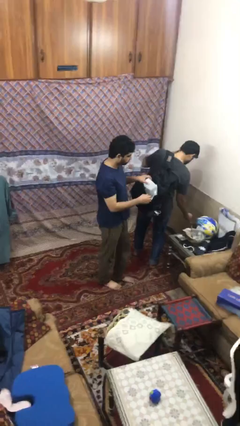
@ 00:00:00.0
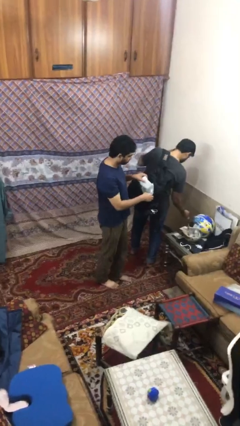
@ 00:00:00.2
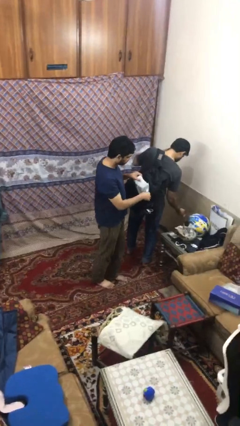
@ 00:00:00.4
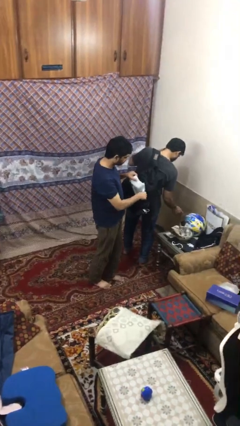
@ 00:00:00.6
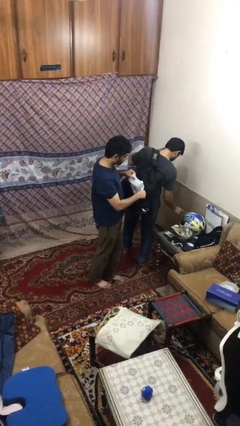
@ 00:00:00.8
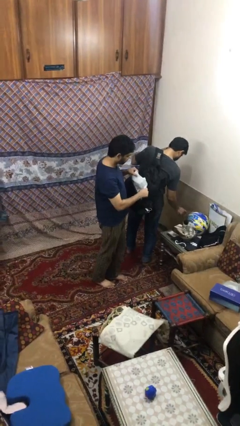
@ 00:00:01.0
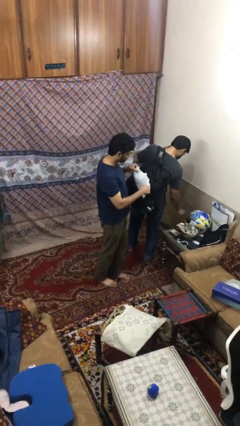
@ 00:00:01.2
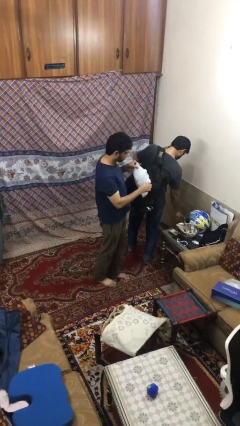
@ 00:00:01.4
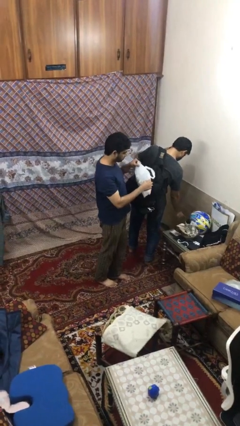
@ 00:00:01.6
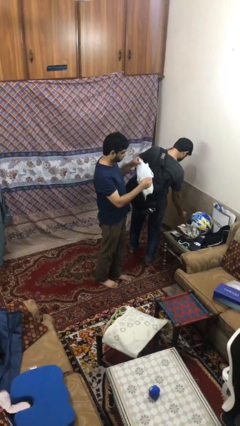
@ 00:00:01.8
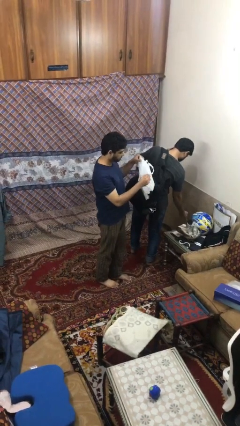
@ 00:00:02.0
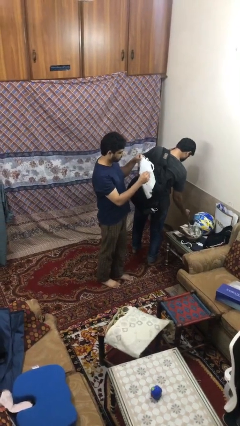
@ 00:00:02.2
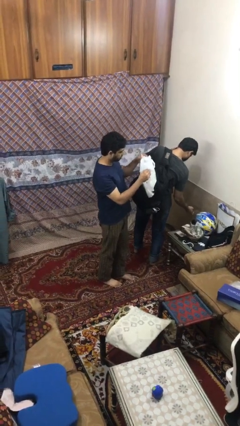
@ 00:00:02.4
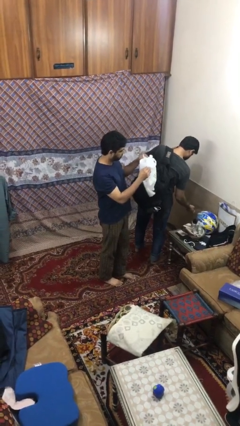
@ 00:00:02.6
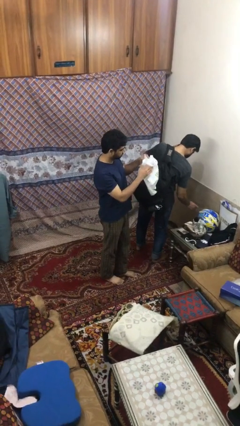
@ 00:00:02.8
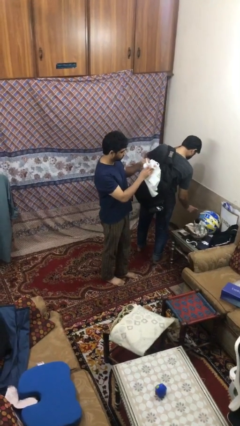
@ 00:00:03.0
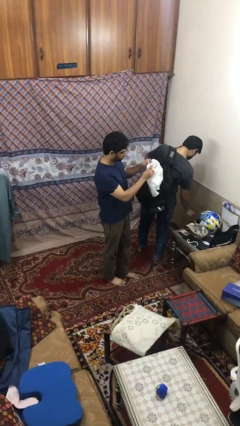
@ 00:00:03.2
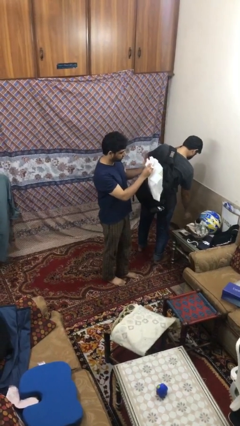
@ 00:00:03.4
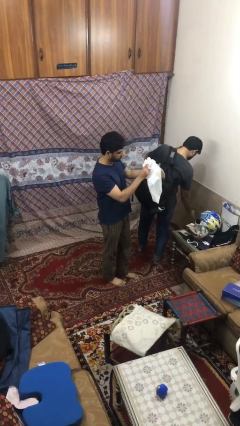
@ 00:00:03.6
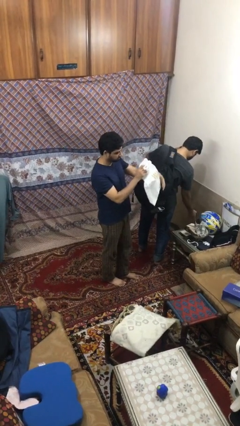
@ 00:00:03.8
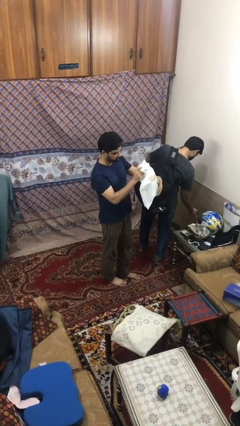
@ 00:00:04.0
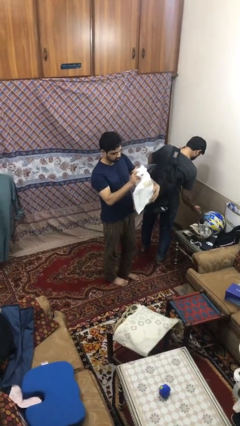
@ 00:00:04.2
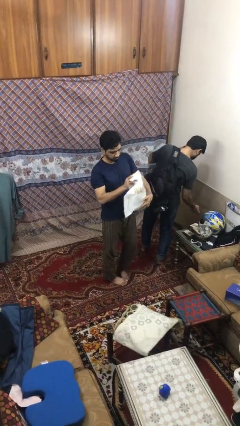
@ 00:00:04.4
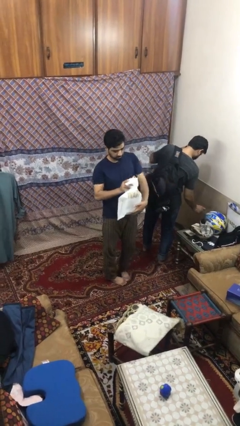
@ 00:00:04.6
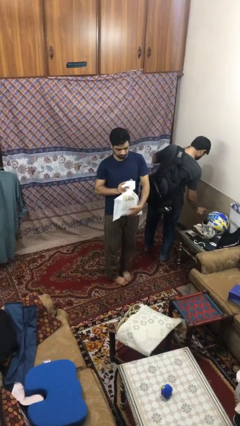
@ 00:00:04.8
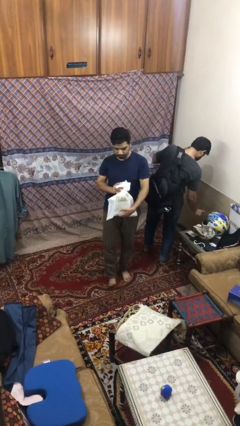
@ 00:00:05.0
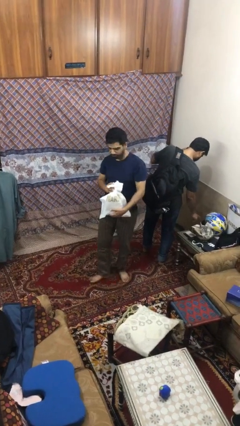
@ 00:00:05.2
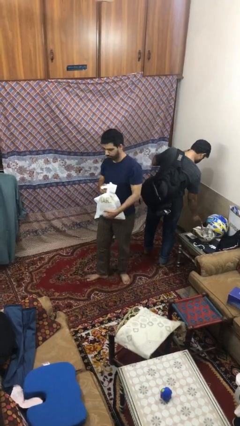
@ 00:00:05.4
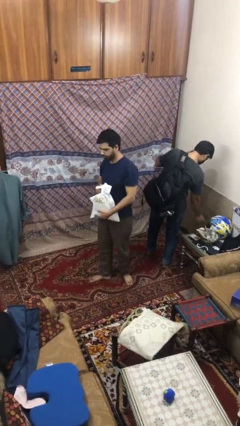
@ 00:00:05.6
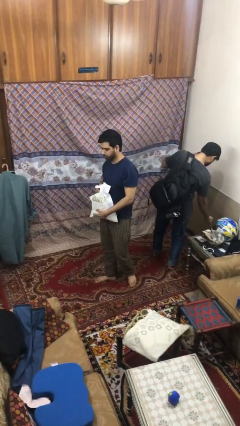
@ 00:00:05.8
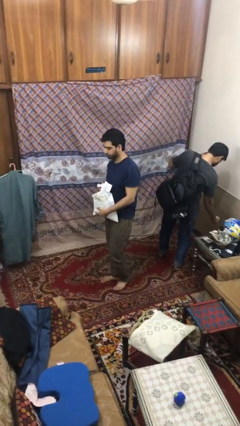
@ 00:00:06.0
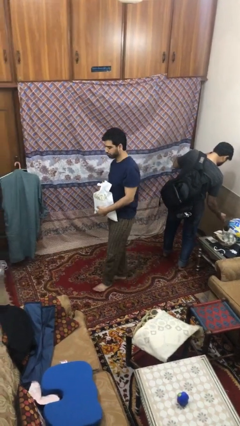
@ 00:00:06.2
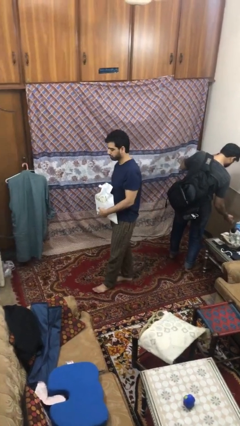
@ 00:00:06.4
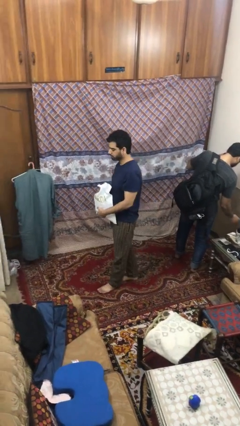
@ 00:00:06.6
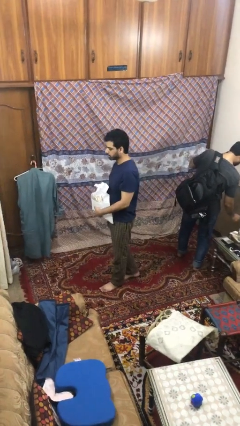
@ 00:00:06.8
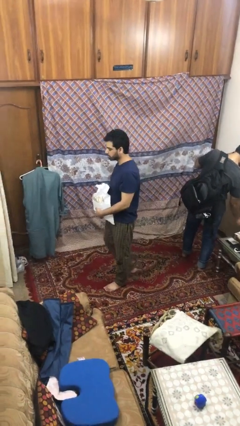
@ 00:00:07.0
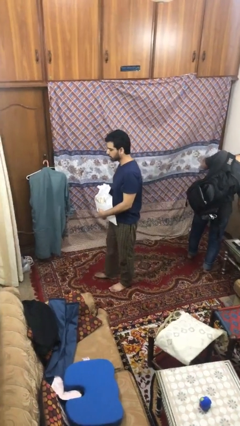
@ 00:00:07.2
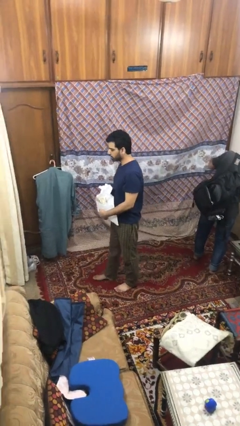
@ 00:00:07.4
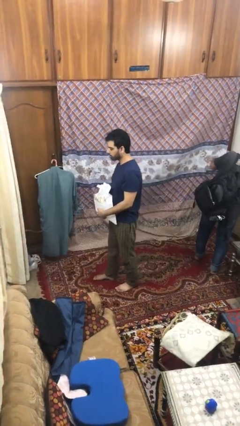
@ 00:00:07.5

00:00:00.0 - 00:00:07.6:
person steals object from person

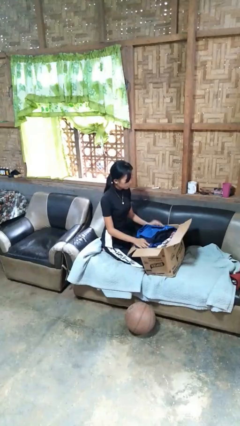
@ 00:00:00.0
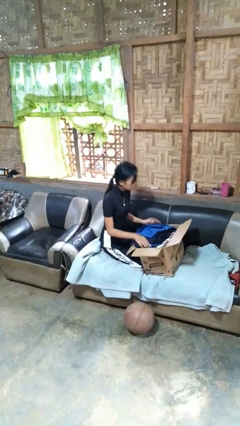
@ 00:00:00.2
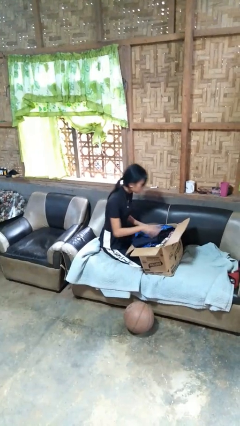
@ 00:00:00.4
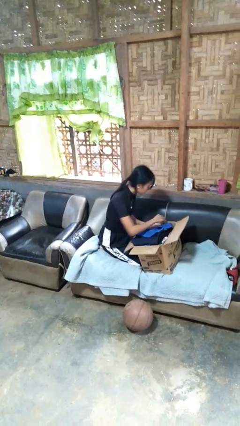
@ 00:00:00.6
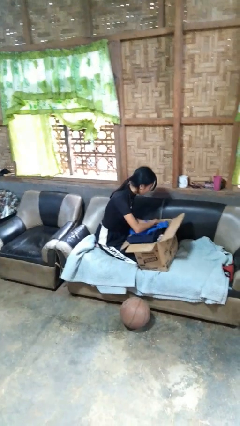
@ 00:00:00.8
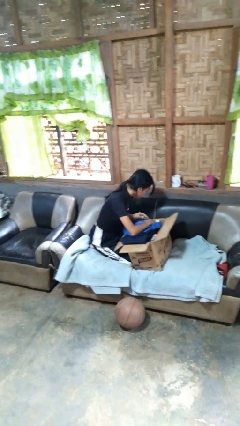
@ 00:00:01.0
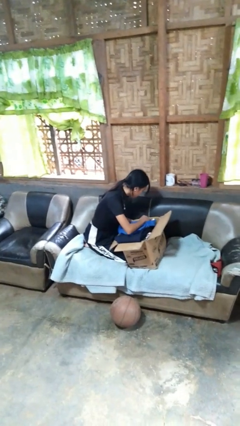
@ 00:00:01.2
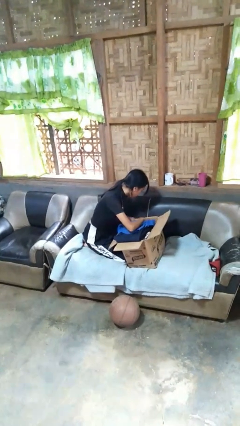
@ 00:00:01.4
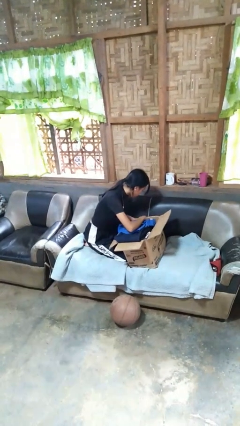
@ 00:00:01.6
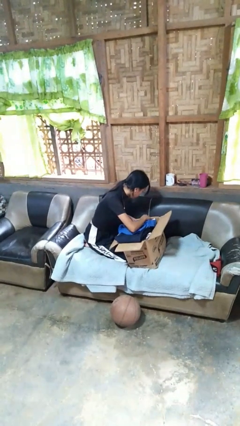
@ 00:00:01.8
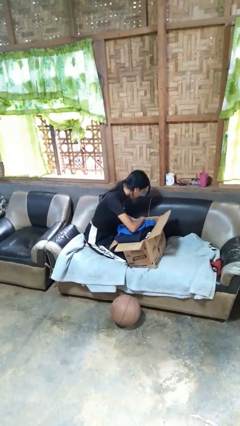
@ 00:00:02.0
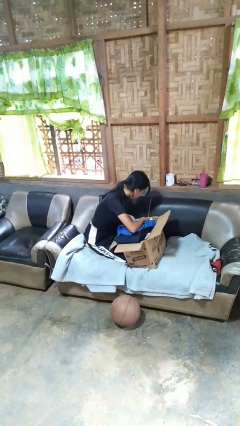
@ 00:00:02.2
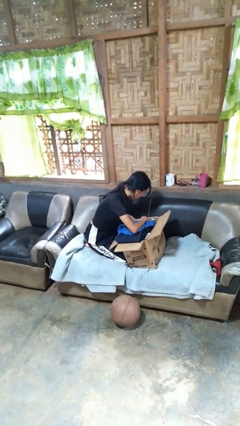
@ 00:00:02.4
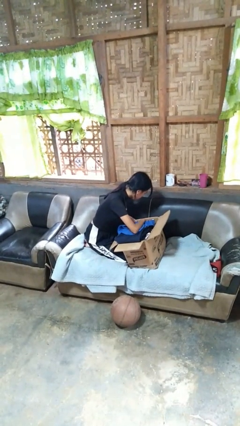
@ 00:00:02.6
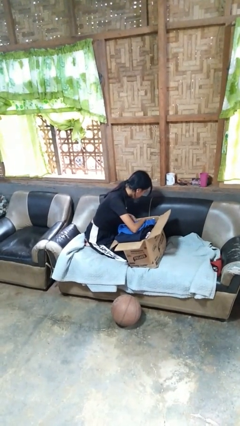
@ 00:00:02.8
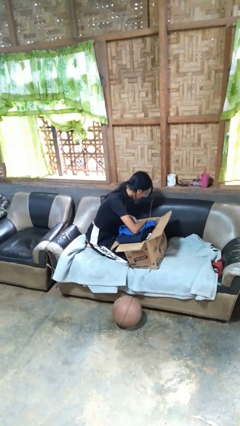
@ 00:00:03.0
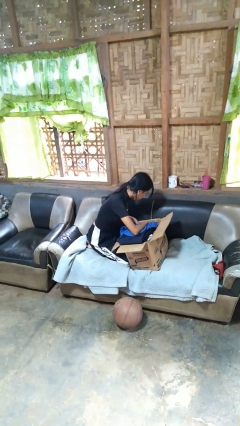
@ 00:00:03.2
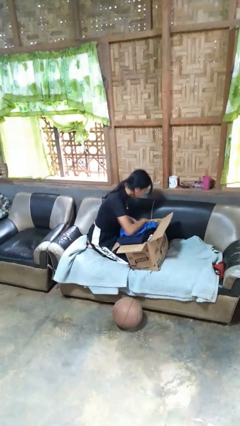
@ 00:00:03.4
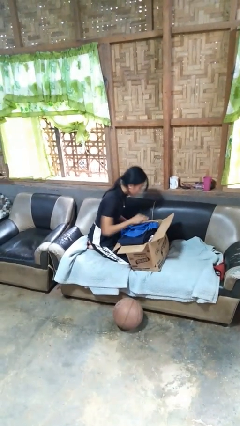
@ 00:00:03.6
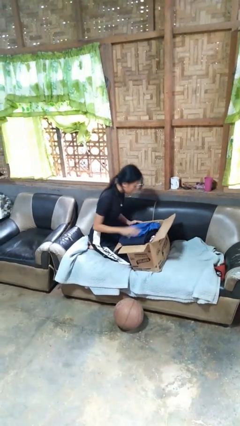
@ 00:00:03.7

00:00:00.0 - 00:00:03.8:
person searches in box

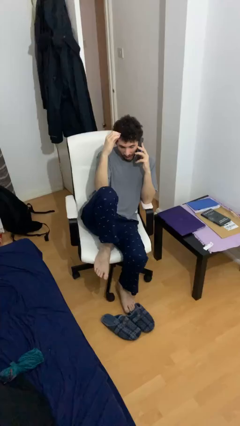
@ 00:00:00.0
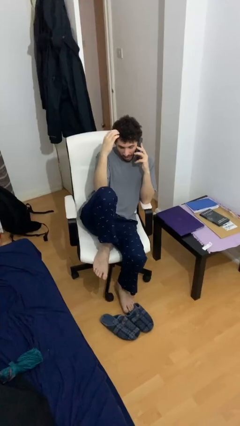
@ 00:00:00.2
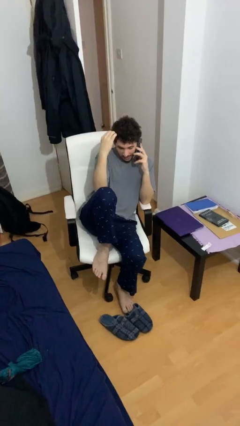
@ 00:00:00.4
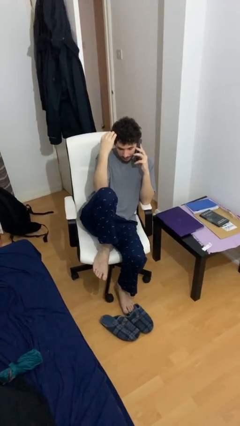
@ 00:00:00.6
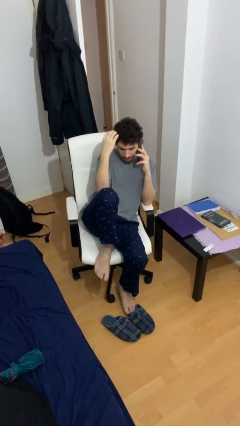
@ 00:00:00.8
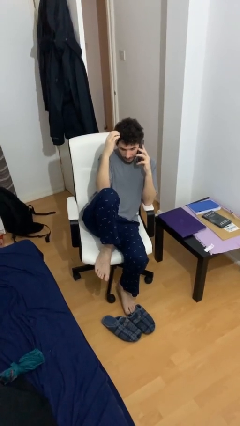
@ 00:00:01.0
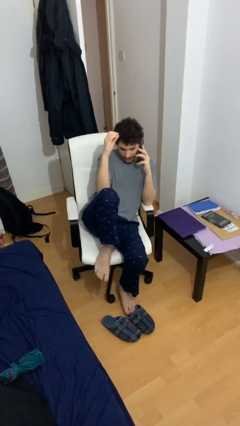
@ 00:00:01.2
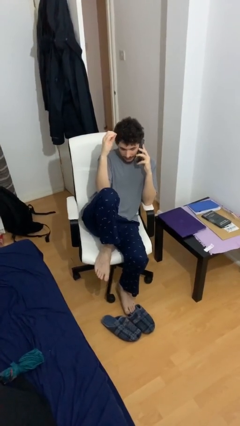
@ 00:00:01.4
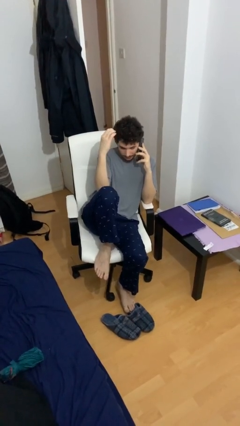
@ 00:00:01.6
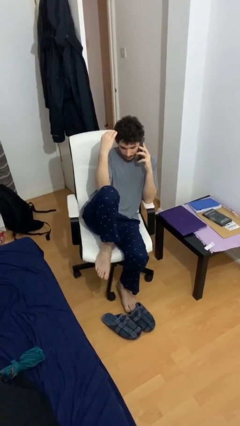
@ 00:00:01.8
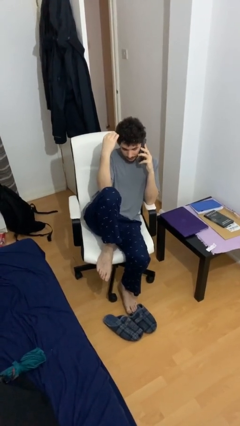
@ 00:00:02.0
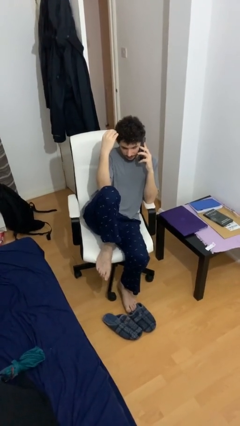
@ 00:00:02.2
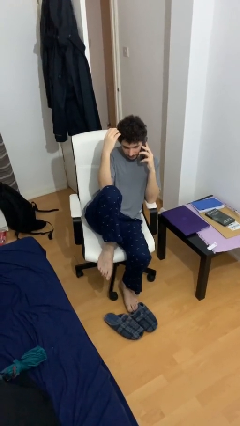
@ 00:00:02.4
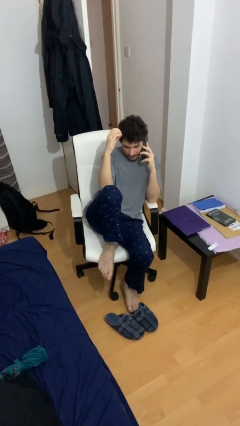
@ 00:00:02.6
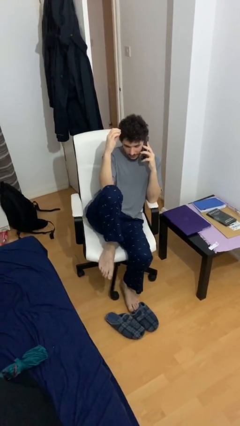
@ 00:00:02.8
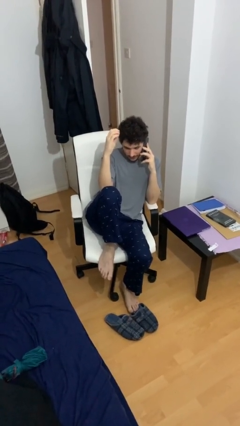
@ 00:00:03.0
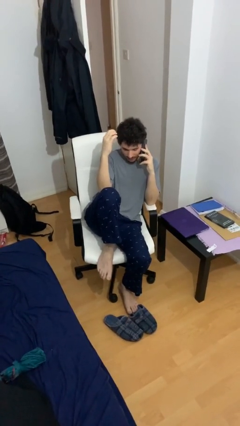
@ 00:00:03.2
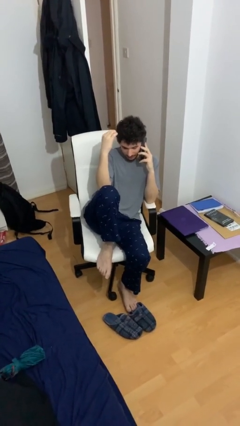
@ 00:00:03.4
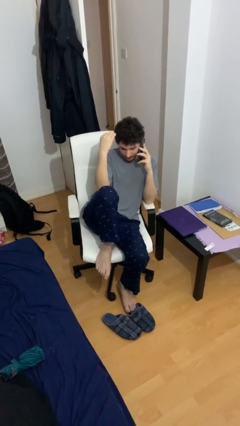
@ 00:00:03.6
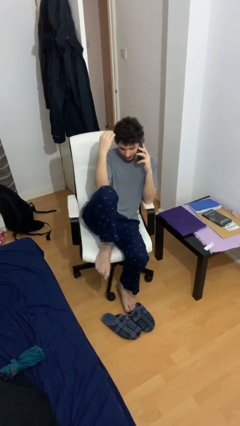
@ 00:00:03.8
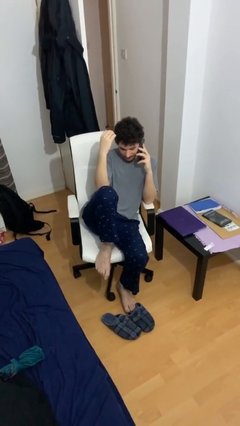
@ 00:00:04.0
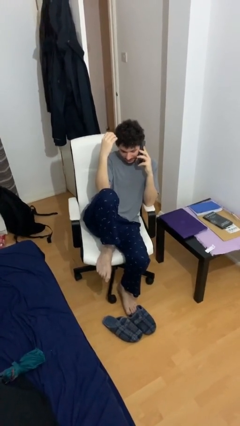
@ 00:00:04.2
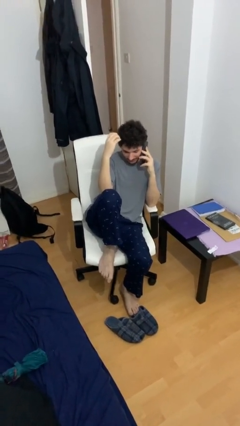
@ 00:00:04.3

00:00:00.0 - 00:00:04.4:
person talks on phone

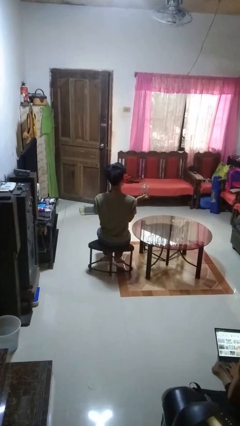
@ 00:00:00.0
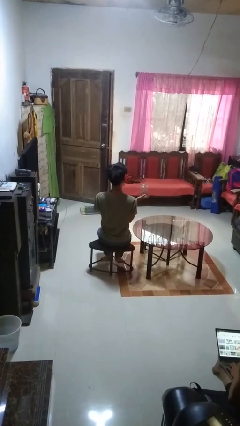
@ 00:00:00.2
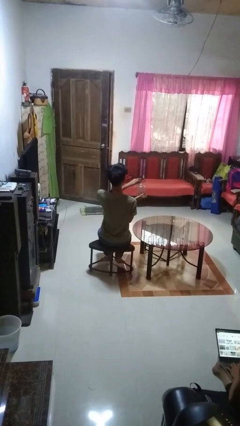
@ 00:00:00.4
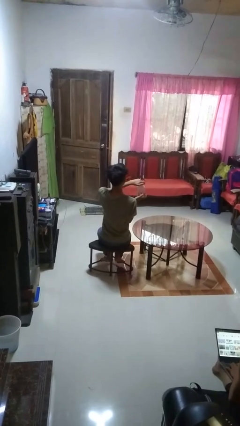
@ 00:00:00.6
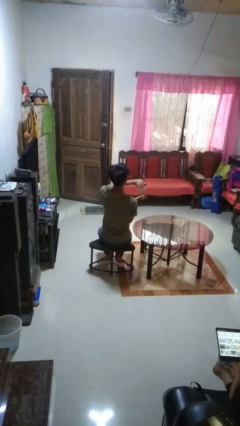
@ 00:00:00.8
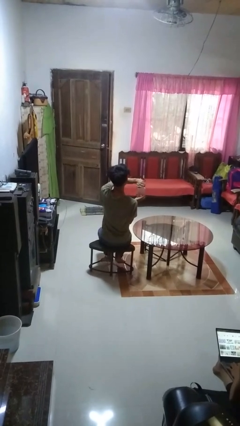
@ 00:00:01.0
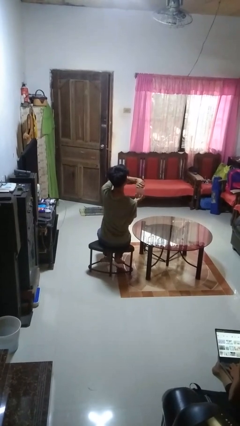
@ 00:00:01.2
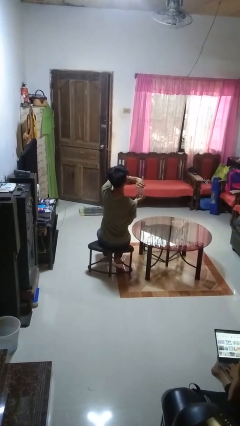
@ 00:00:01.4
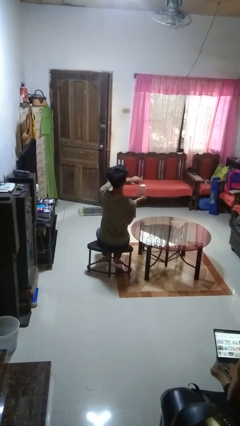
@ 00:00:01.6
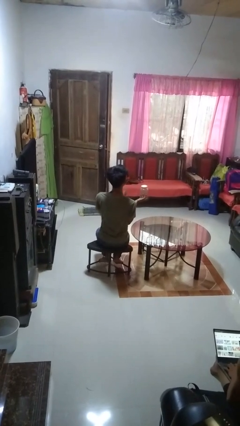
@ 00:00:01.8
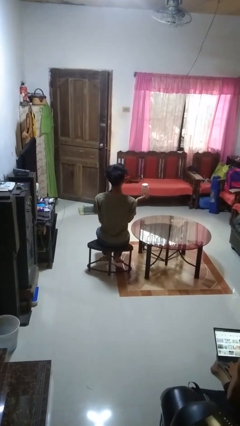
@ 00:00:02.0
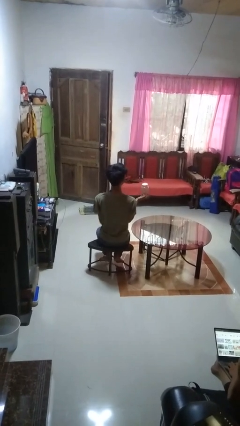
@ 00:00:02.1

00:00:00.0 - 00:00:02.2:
person closes jar
